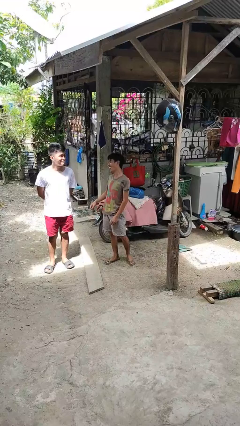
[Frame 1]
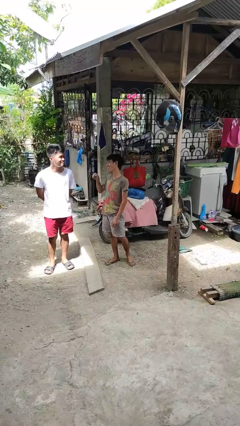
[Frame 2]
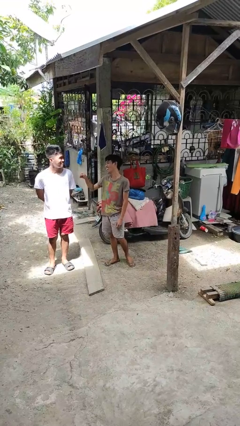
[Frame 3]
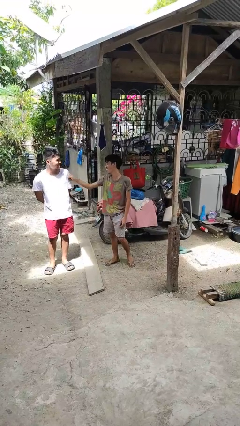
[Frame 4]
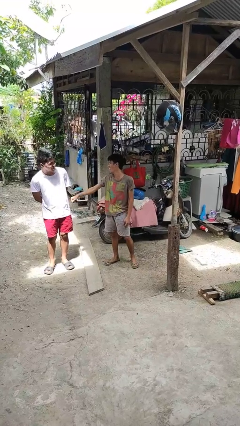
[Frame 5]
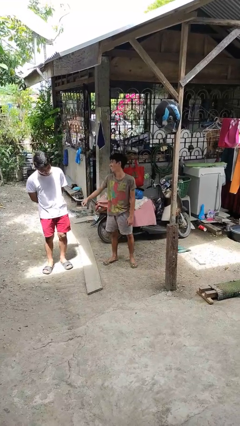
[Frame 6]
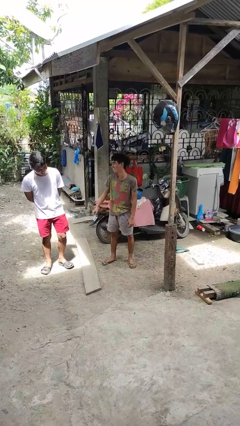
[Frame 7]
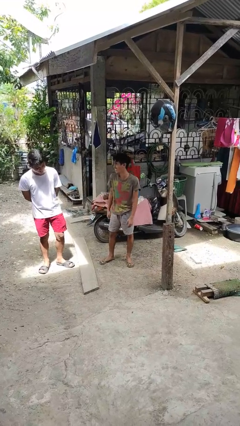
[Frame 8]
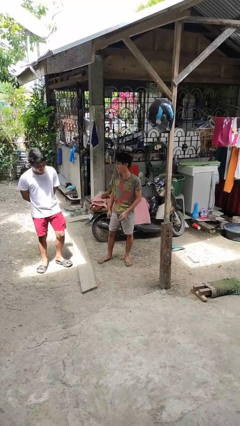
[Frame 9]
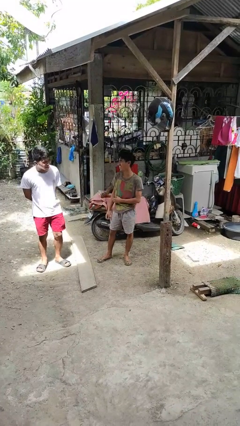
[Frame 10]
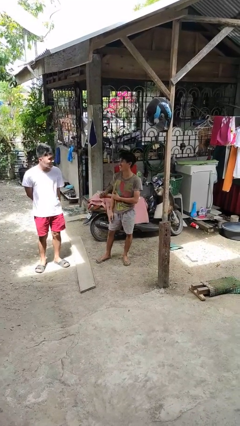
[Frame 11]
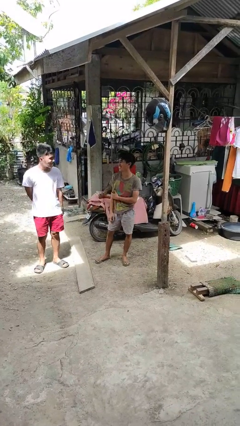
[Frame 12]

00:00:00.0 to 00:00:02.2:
person pounds shoulders of person

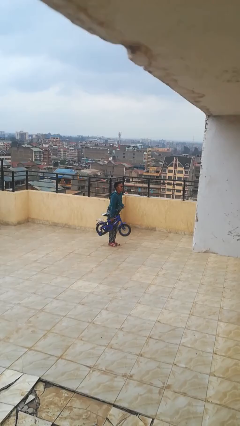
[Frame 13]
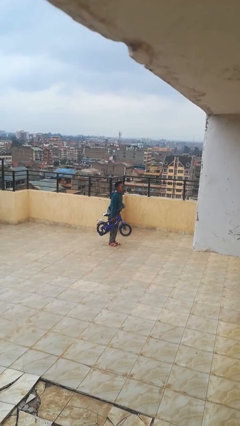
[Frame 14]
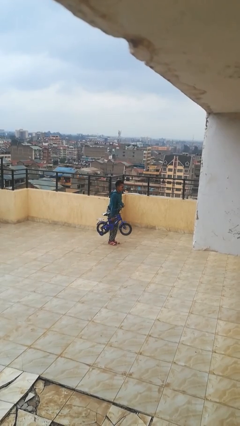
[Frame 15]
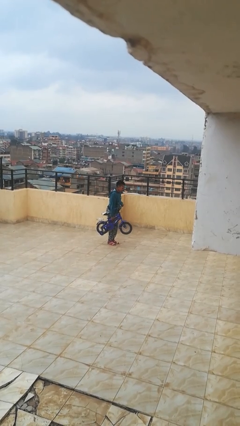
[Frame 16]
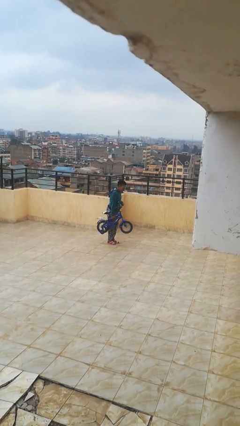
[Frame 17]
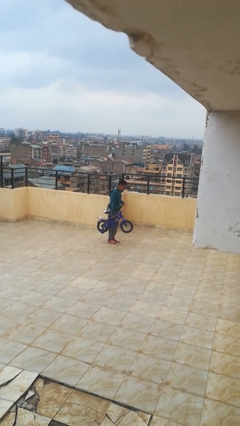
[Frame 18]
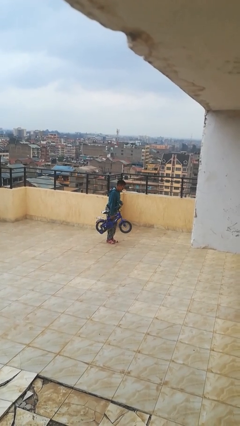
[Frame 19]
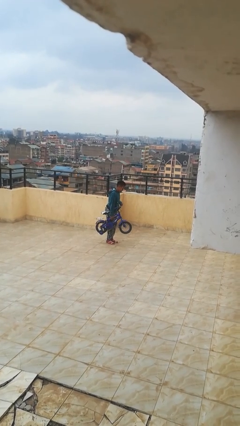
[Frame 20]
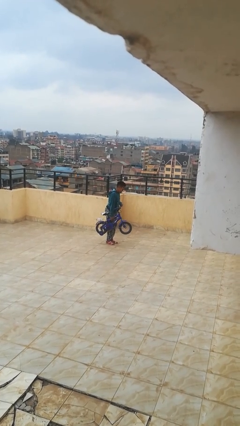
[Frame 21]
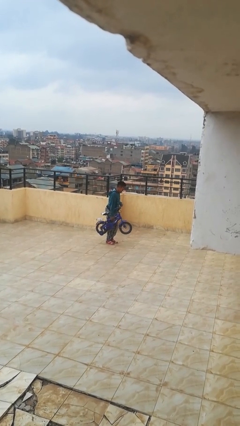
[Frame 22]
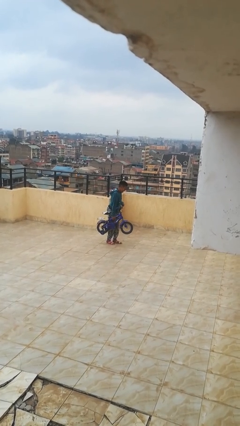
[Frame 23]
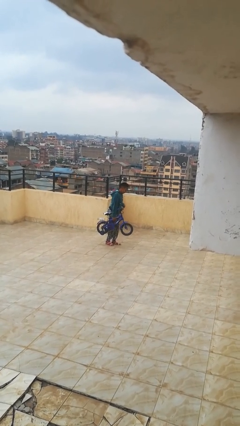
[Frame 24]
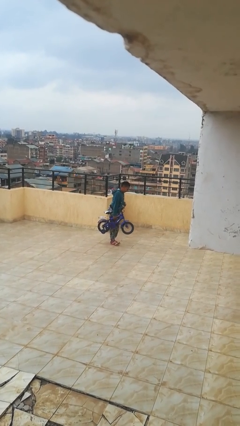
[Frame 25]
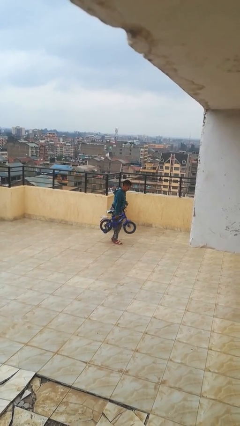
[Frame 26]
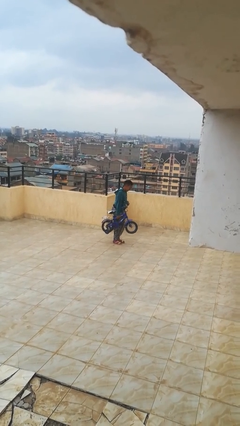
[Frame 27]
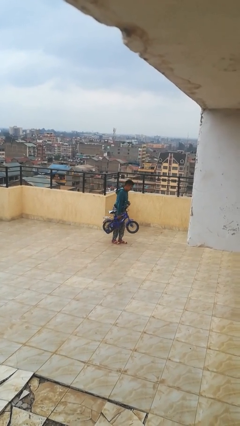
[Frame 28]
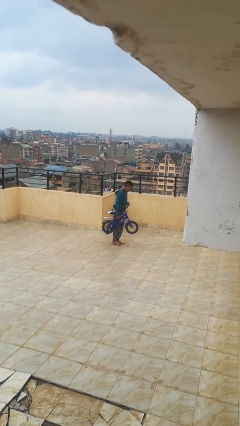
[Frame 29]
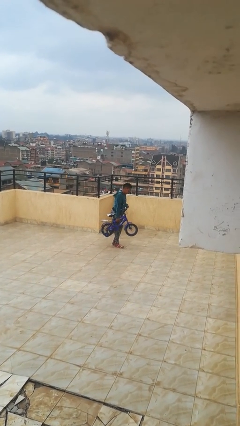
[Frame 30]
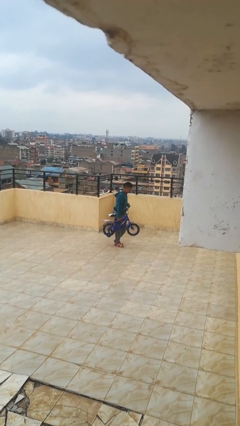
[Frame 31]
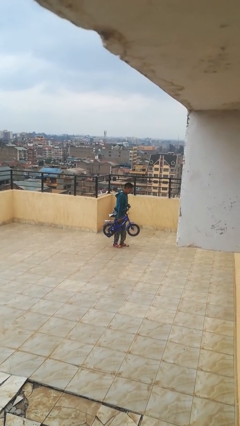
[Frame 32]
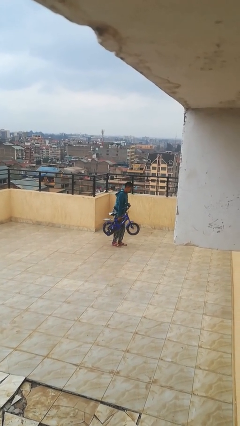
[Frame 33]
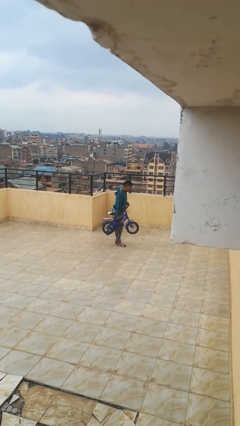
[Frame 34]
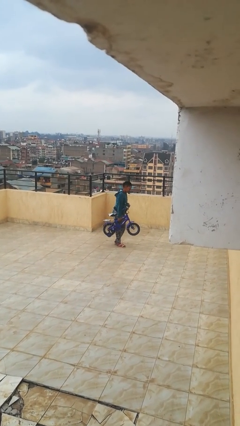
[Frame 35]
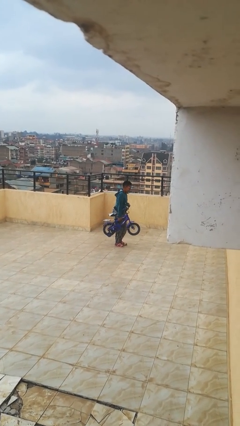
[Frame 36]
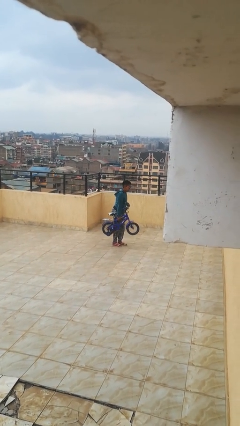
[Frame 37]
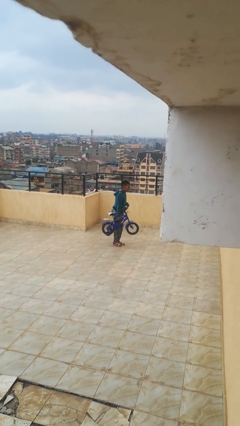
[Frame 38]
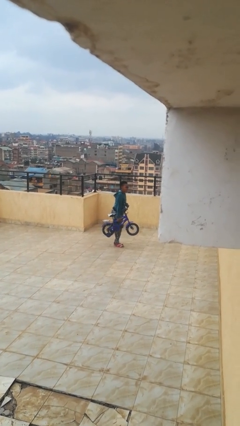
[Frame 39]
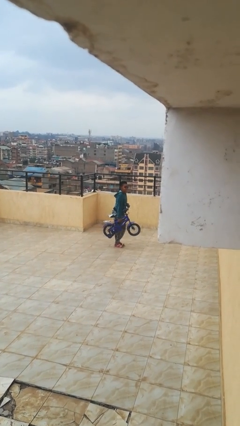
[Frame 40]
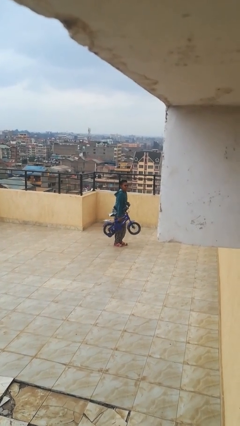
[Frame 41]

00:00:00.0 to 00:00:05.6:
person carries bicycle

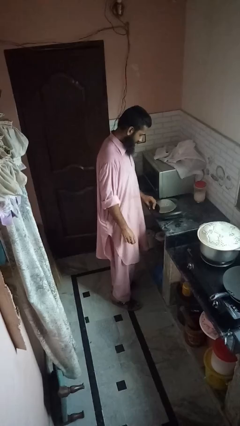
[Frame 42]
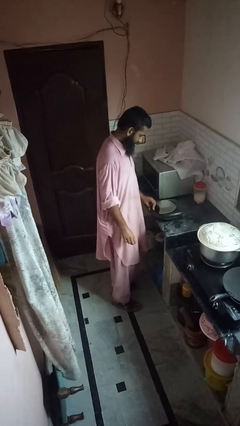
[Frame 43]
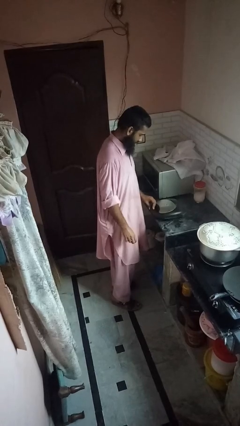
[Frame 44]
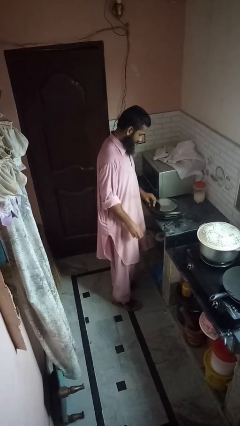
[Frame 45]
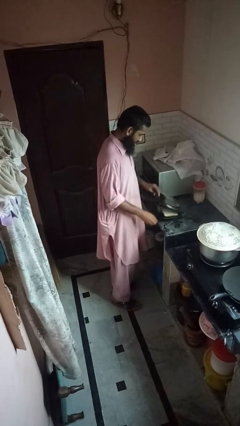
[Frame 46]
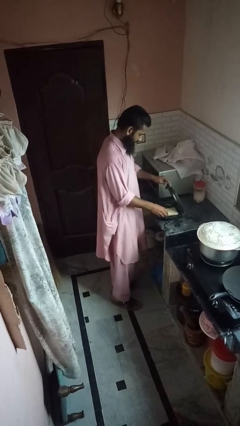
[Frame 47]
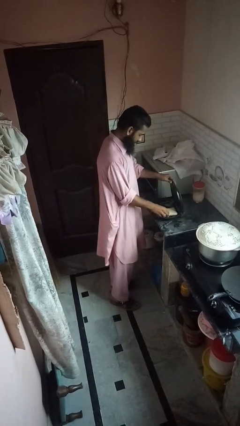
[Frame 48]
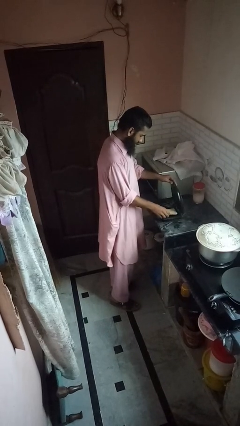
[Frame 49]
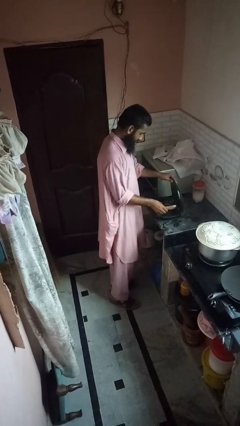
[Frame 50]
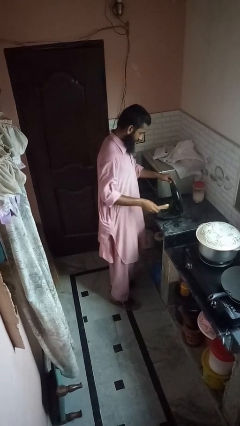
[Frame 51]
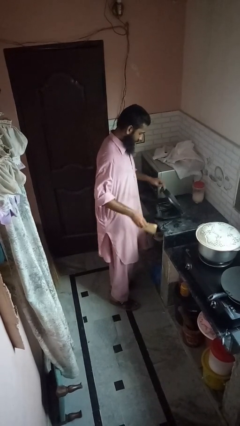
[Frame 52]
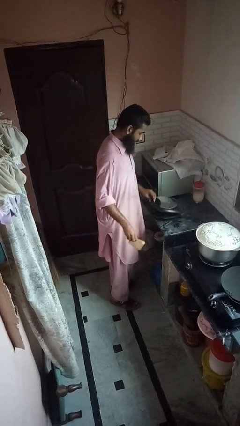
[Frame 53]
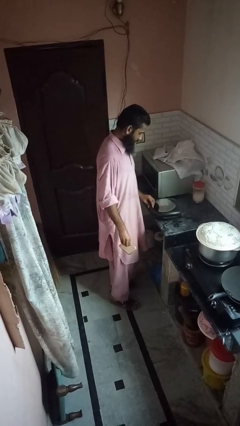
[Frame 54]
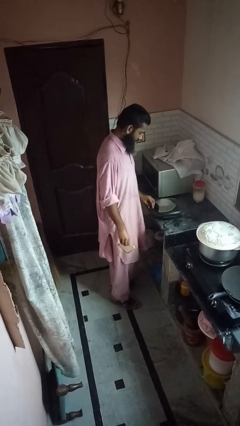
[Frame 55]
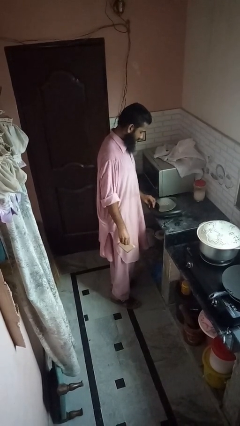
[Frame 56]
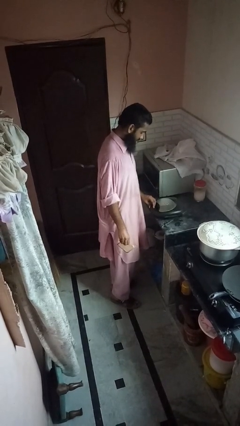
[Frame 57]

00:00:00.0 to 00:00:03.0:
person takes object from toaster

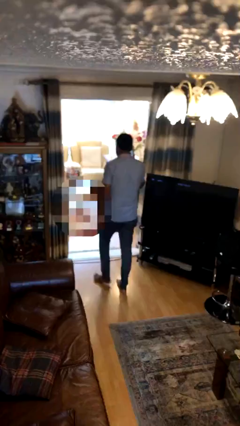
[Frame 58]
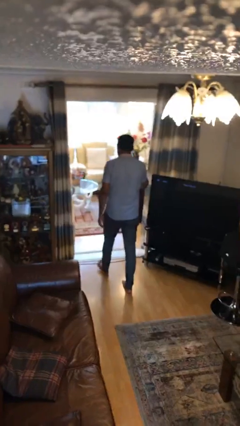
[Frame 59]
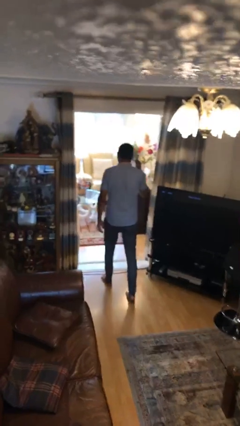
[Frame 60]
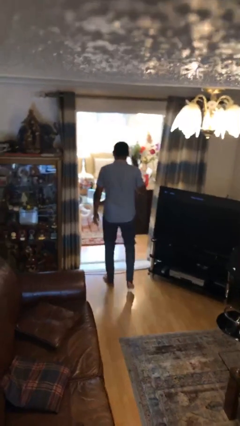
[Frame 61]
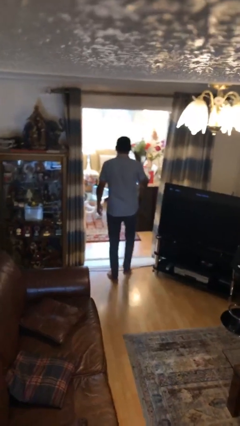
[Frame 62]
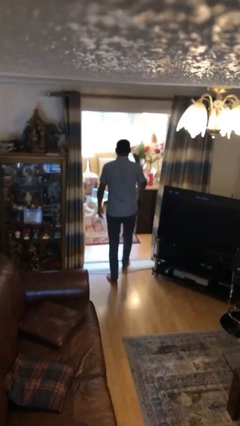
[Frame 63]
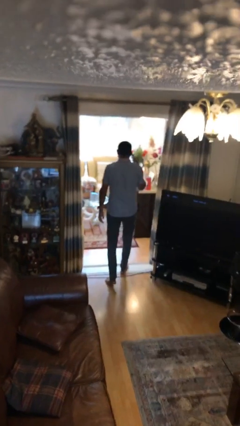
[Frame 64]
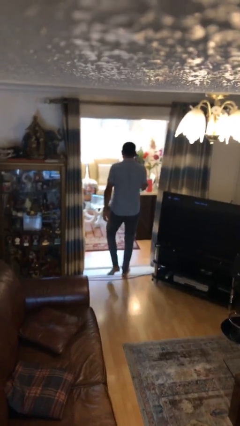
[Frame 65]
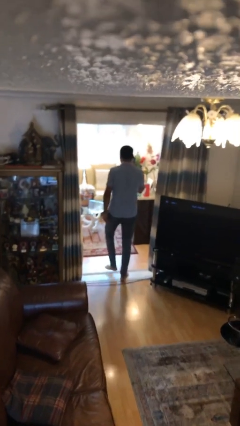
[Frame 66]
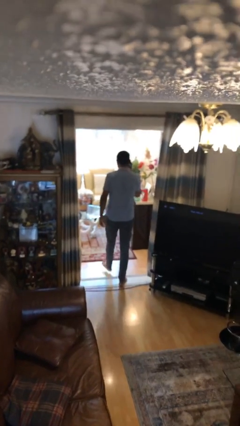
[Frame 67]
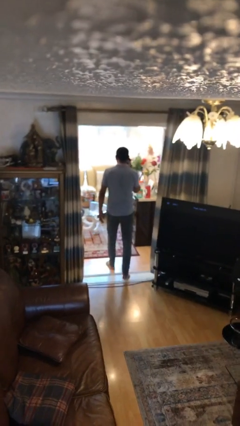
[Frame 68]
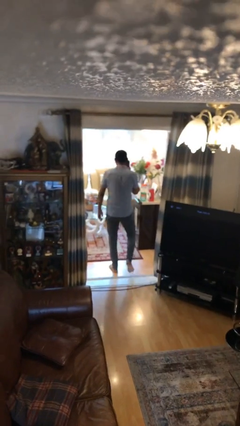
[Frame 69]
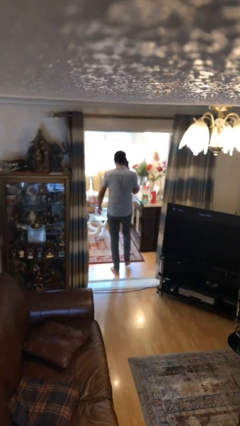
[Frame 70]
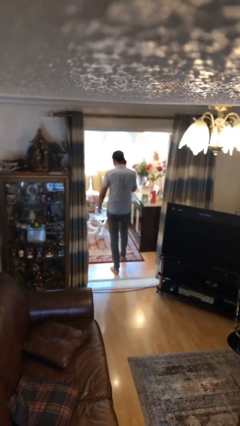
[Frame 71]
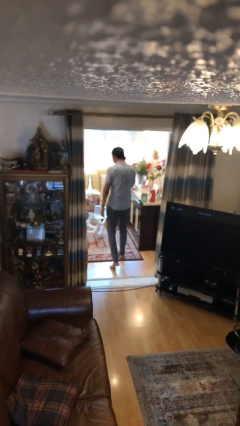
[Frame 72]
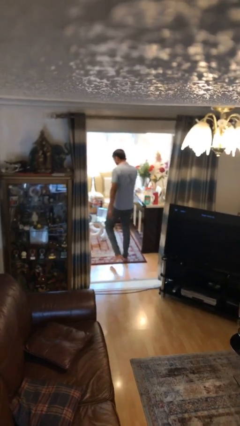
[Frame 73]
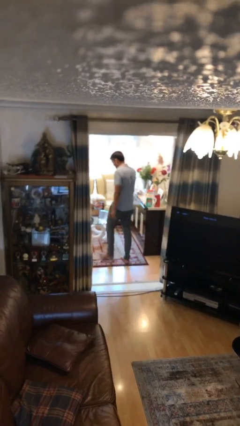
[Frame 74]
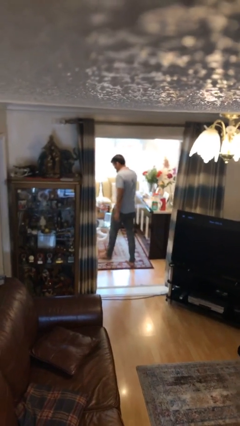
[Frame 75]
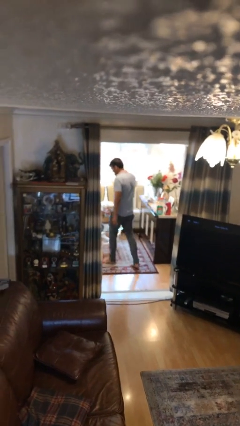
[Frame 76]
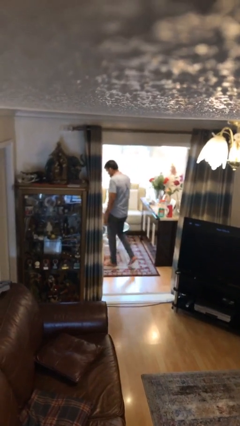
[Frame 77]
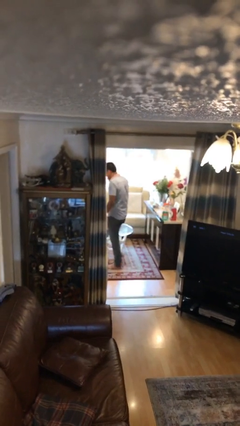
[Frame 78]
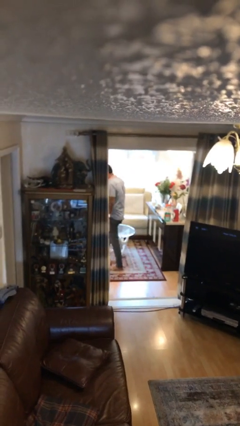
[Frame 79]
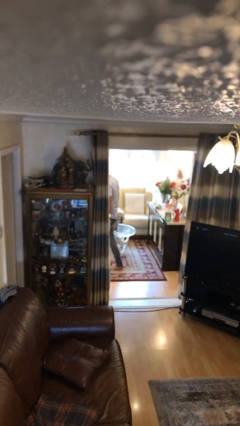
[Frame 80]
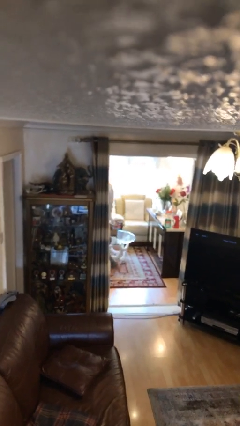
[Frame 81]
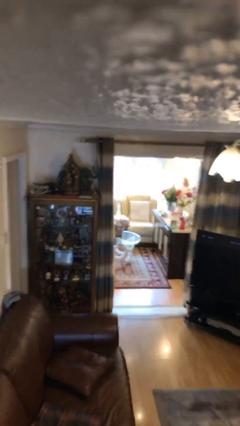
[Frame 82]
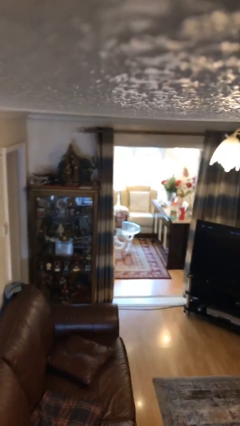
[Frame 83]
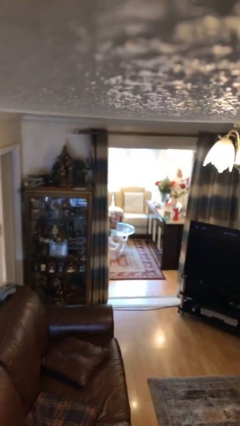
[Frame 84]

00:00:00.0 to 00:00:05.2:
person exits scene through structure

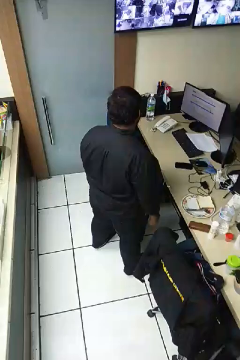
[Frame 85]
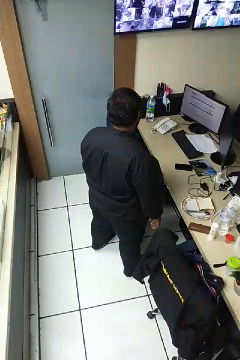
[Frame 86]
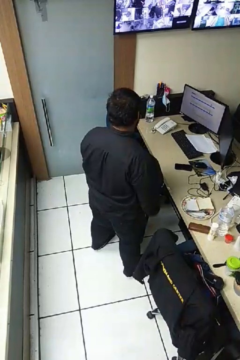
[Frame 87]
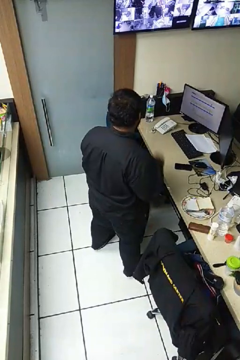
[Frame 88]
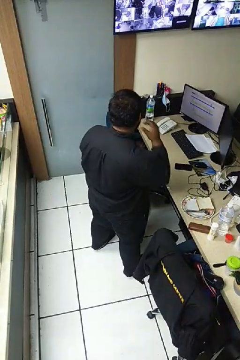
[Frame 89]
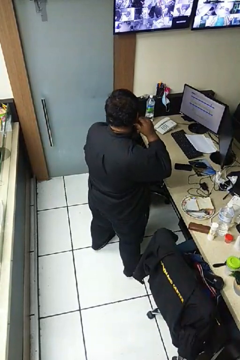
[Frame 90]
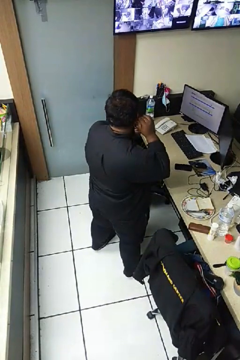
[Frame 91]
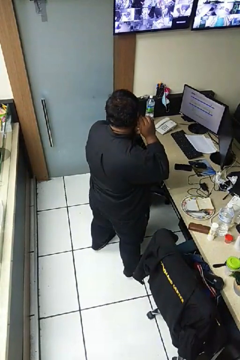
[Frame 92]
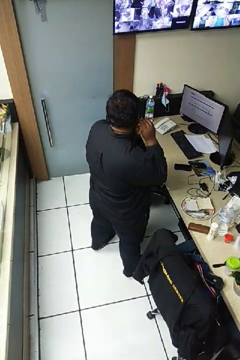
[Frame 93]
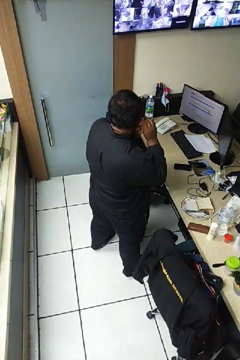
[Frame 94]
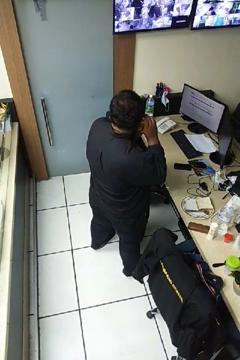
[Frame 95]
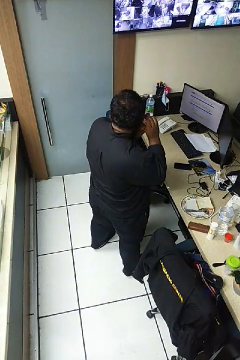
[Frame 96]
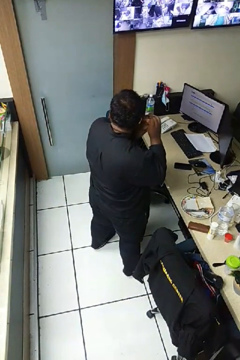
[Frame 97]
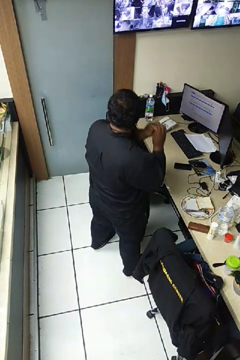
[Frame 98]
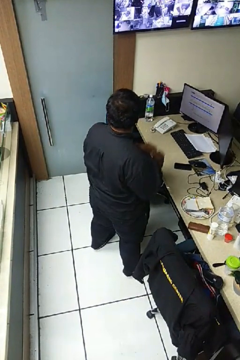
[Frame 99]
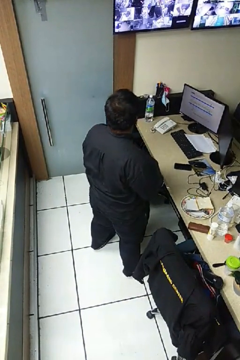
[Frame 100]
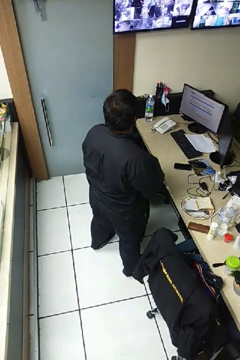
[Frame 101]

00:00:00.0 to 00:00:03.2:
person takes off earrings
